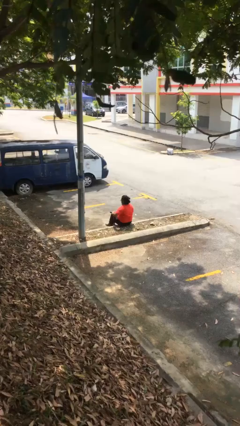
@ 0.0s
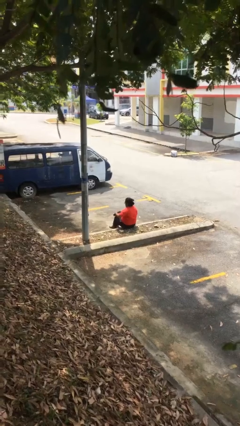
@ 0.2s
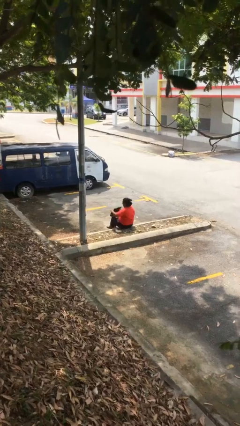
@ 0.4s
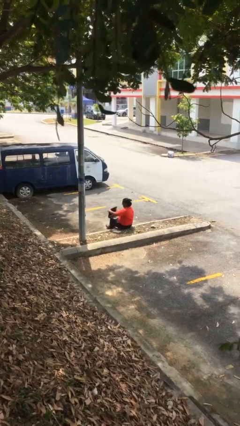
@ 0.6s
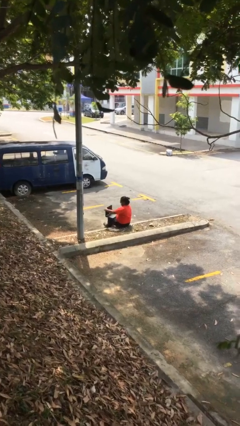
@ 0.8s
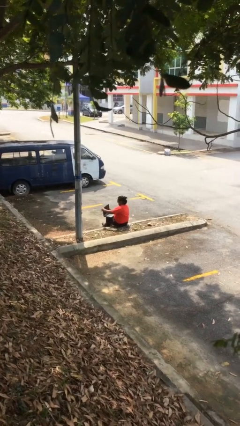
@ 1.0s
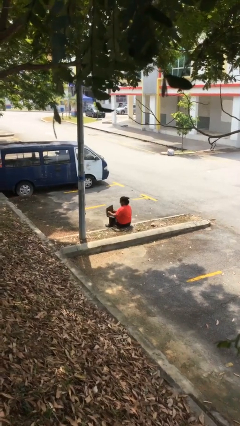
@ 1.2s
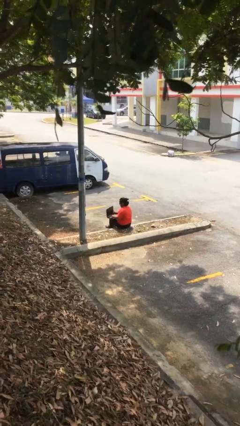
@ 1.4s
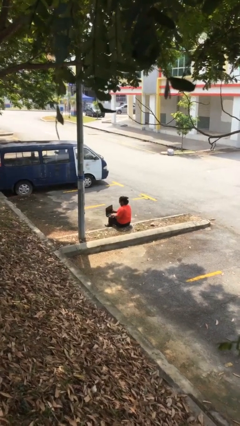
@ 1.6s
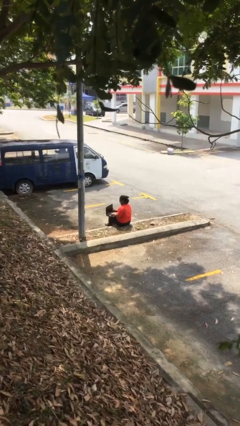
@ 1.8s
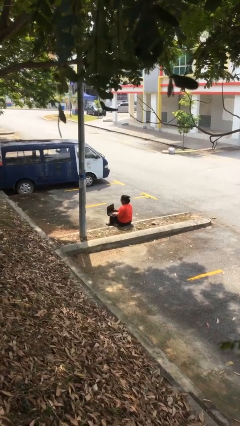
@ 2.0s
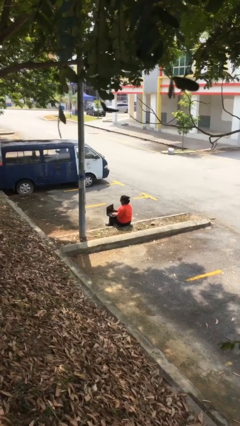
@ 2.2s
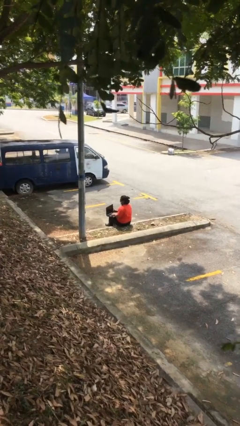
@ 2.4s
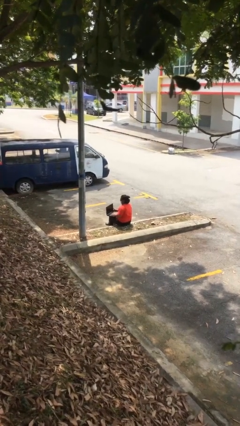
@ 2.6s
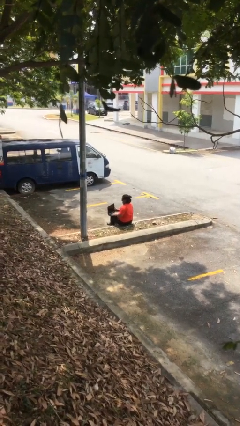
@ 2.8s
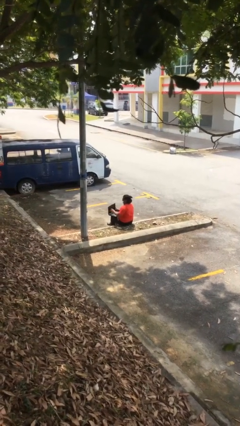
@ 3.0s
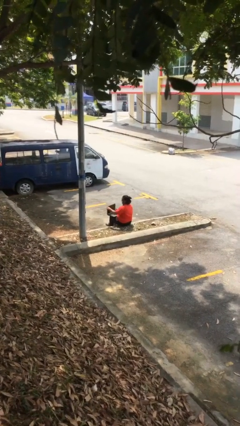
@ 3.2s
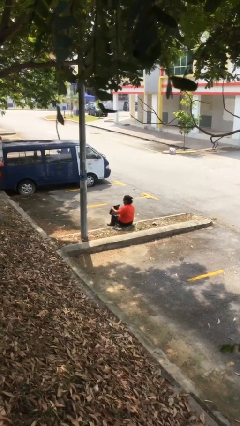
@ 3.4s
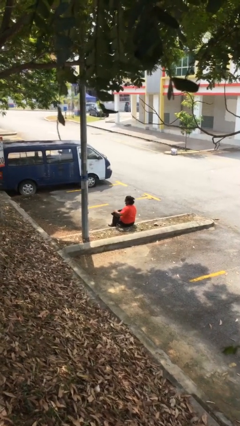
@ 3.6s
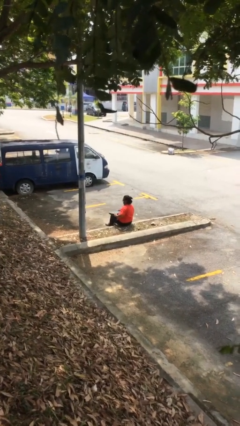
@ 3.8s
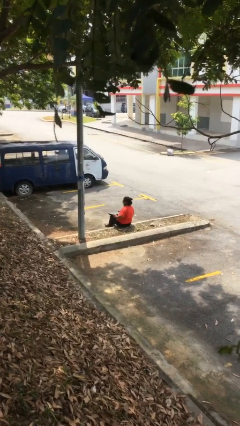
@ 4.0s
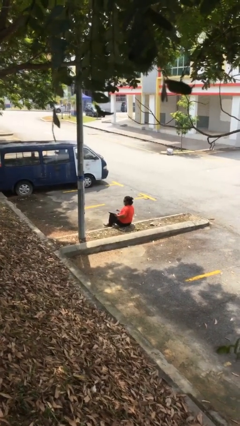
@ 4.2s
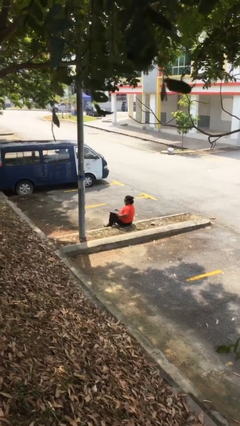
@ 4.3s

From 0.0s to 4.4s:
person interacts with laptop

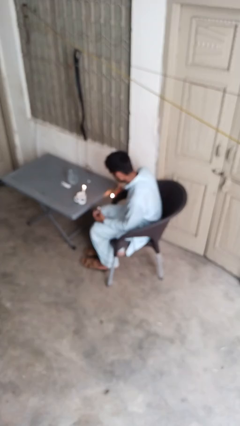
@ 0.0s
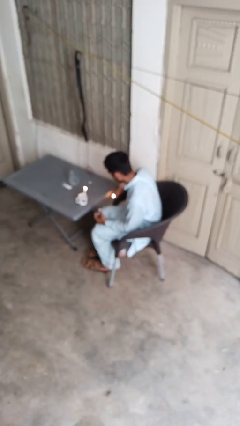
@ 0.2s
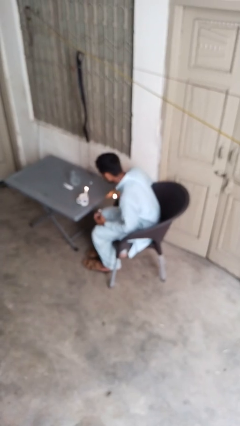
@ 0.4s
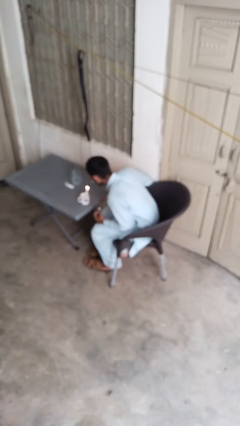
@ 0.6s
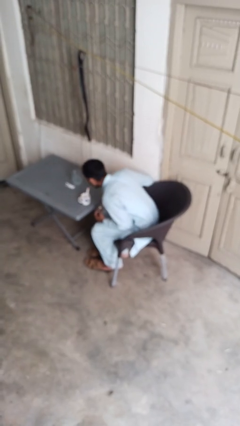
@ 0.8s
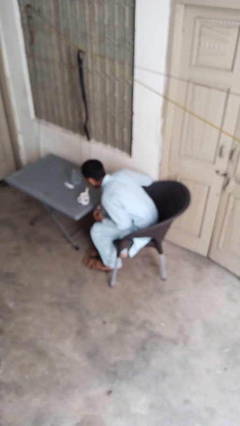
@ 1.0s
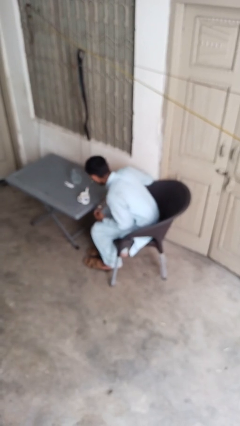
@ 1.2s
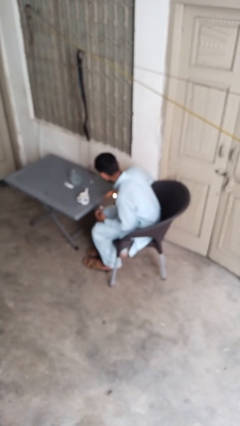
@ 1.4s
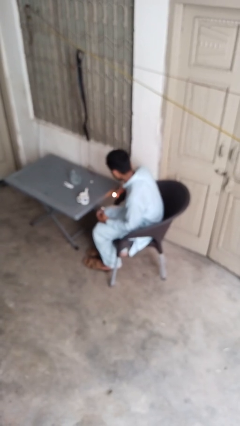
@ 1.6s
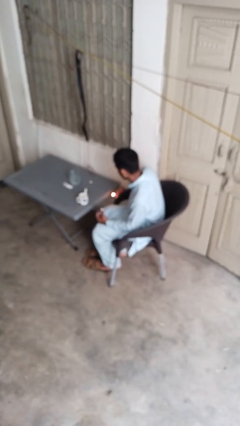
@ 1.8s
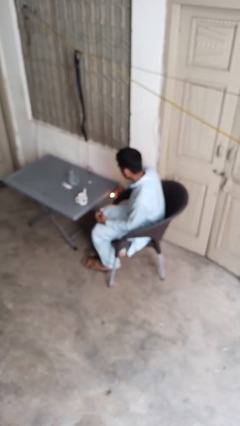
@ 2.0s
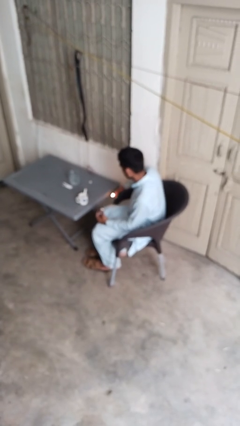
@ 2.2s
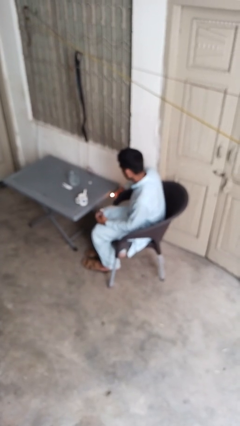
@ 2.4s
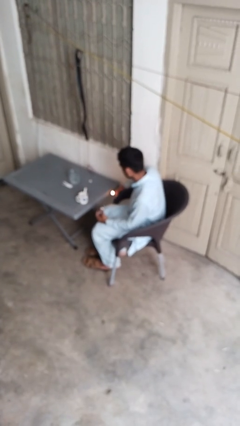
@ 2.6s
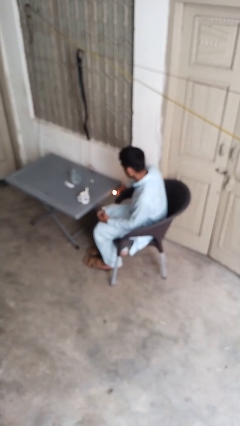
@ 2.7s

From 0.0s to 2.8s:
person extinguishes candle

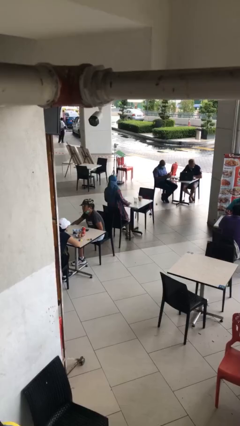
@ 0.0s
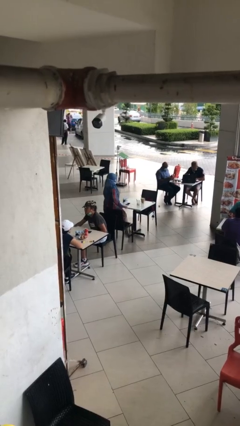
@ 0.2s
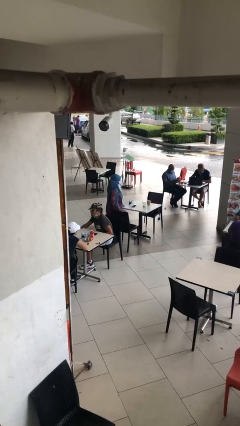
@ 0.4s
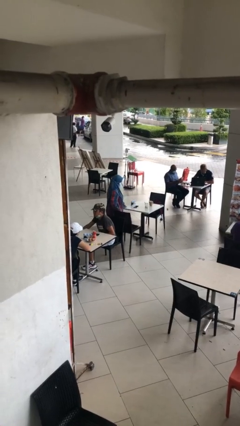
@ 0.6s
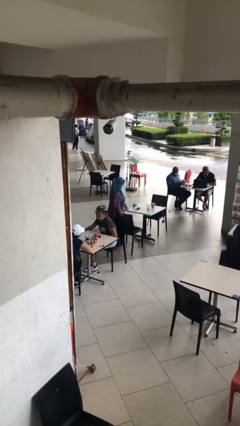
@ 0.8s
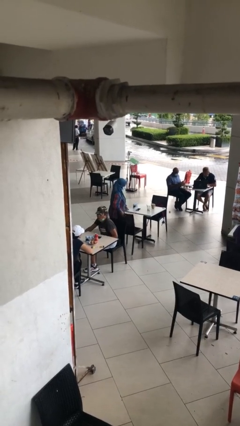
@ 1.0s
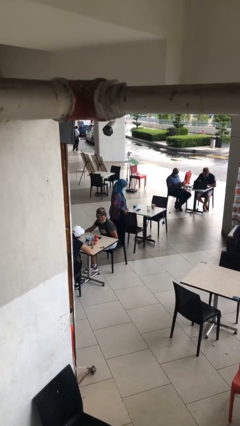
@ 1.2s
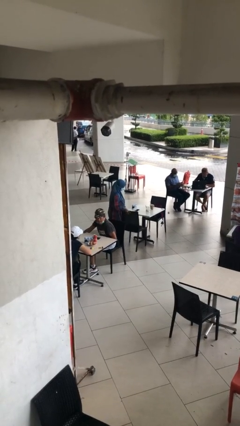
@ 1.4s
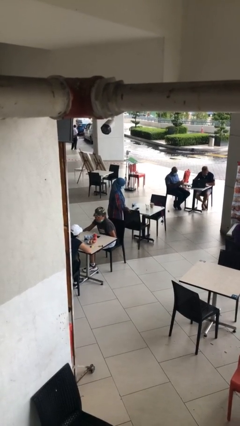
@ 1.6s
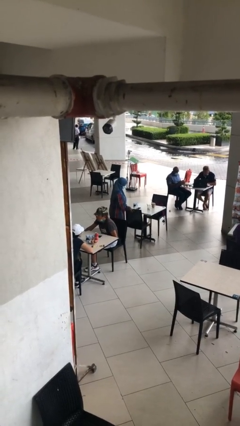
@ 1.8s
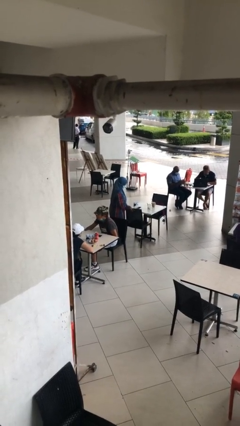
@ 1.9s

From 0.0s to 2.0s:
person stands up

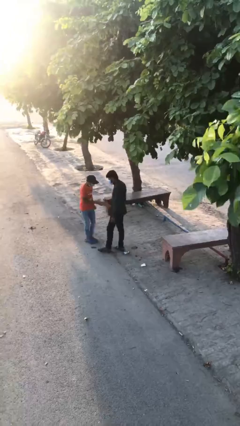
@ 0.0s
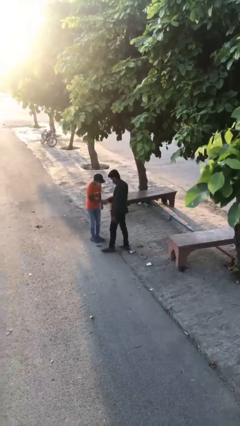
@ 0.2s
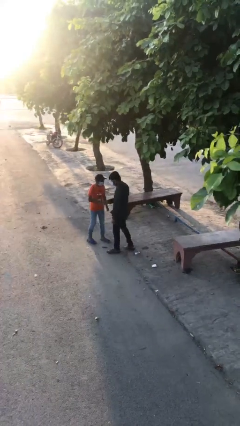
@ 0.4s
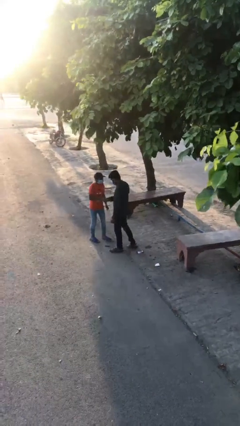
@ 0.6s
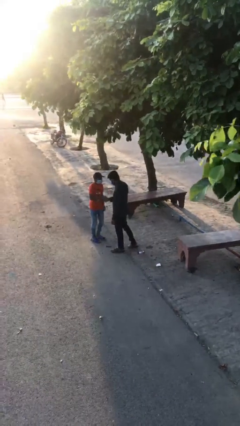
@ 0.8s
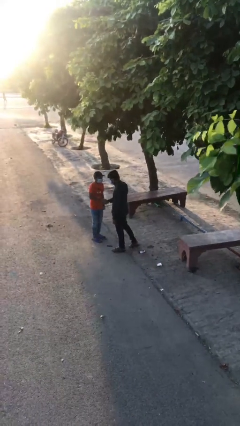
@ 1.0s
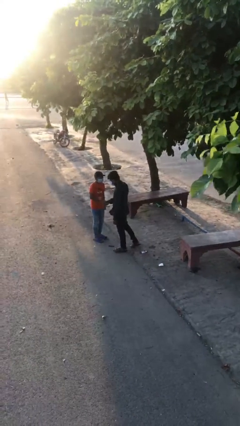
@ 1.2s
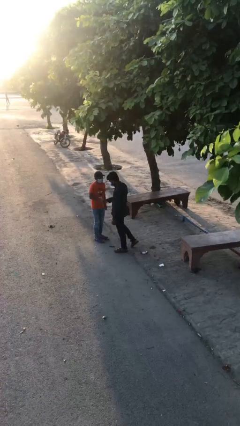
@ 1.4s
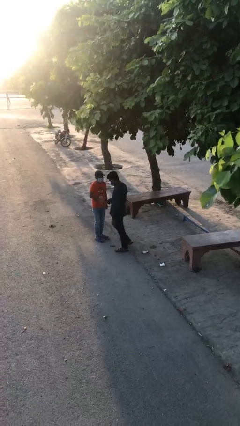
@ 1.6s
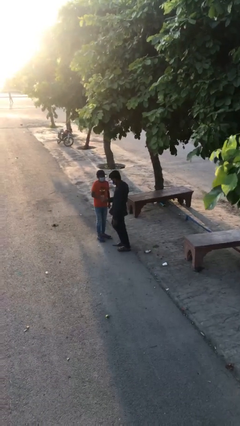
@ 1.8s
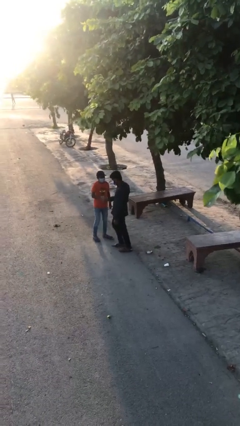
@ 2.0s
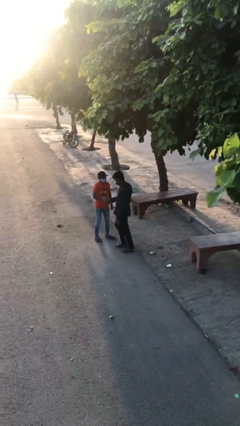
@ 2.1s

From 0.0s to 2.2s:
person shakes hand

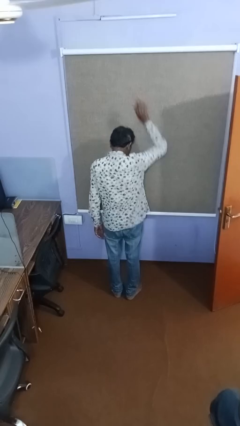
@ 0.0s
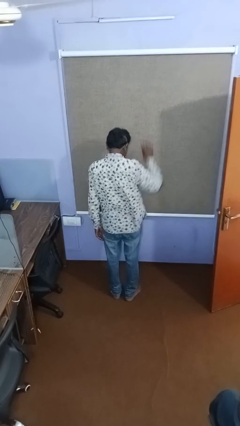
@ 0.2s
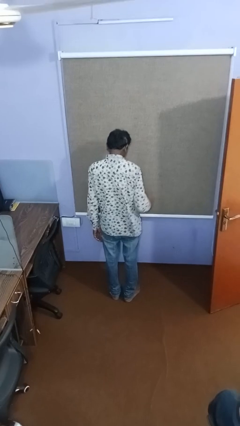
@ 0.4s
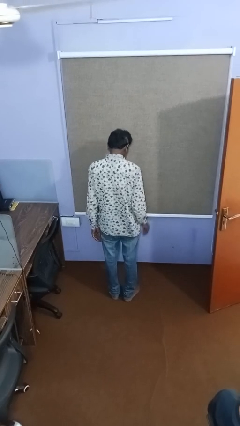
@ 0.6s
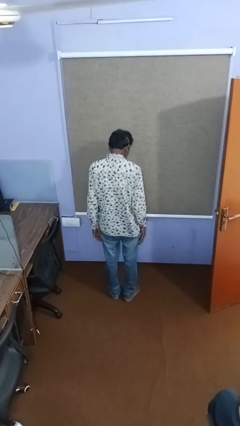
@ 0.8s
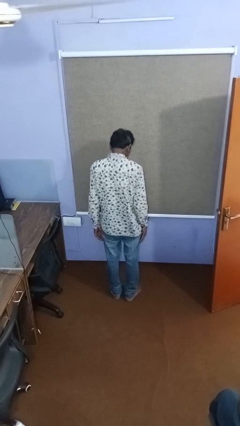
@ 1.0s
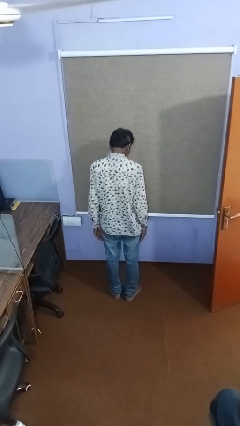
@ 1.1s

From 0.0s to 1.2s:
person gestures lower hand

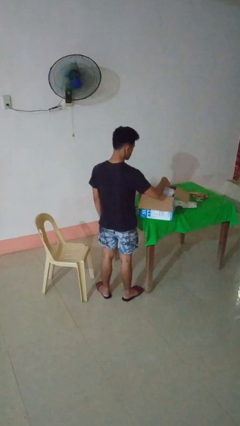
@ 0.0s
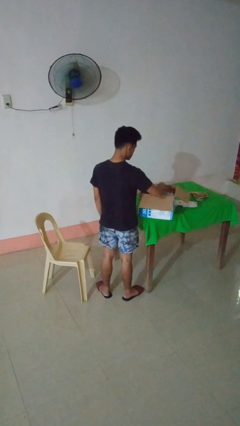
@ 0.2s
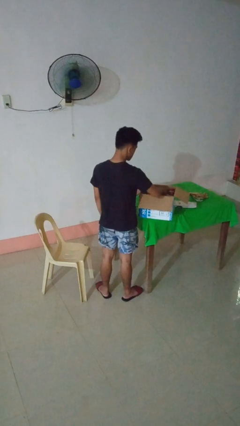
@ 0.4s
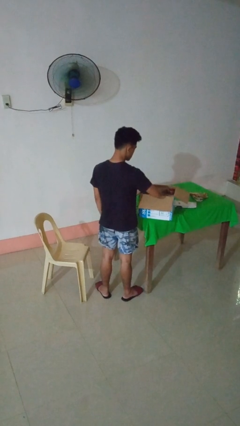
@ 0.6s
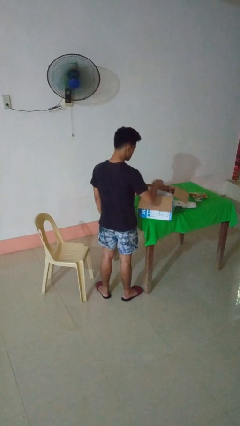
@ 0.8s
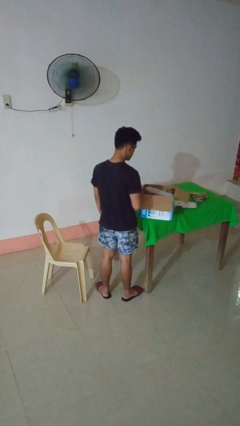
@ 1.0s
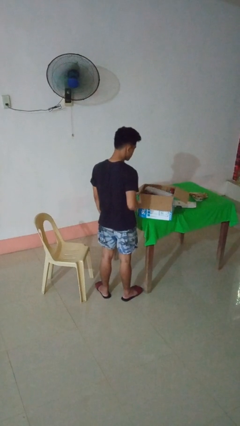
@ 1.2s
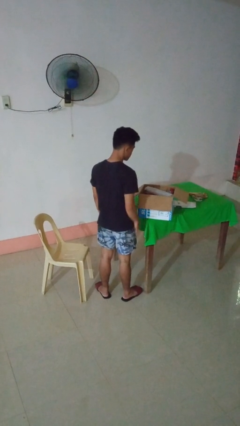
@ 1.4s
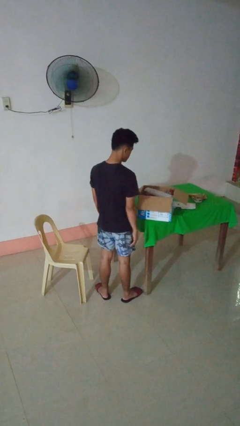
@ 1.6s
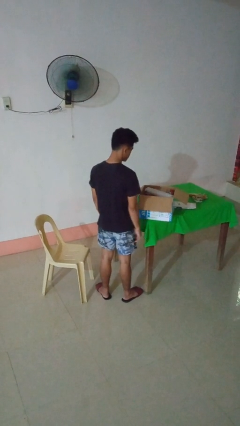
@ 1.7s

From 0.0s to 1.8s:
person puts object into box

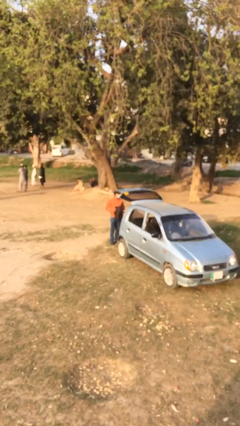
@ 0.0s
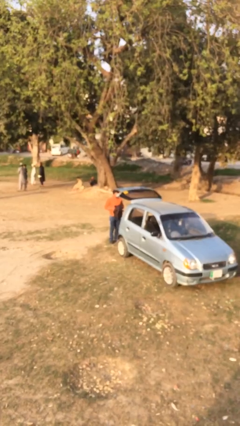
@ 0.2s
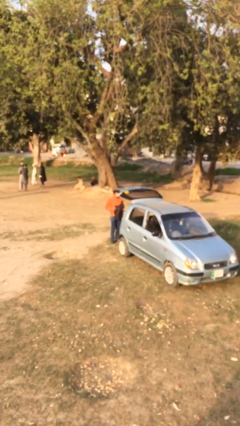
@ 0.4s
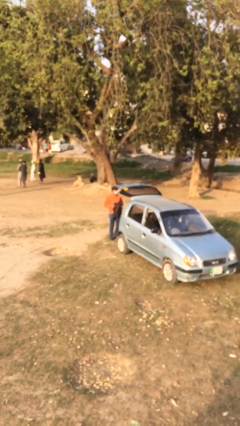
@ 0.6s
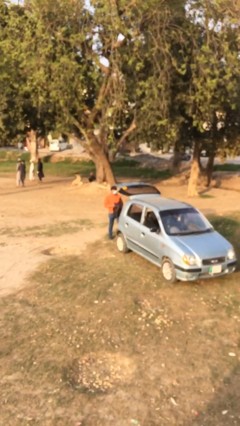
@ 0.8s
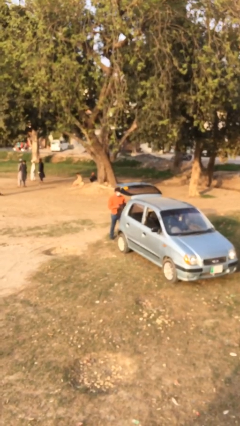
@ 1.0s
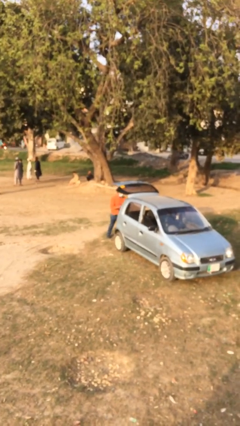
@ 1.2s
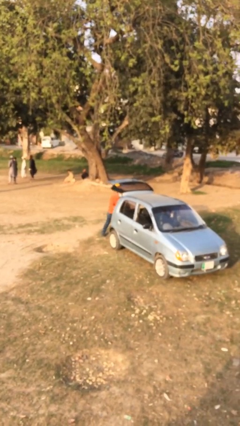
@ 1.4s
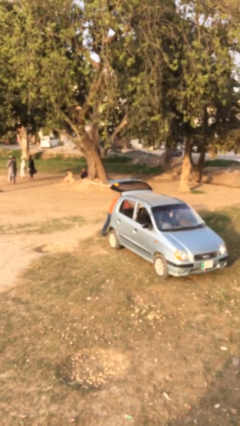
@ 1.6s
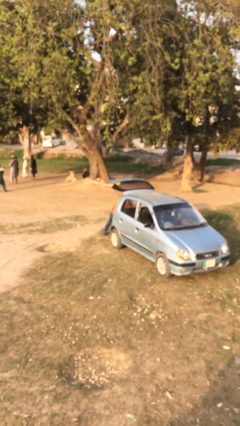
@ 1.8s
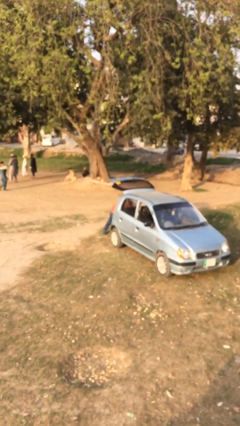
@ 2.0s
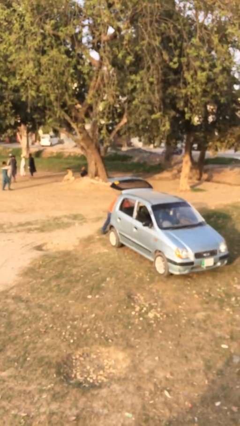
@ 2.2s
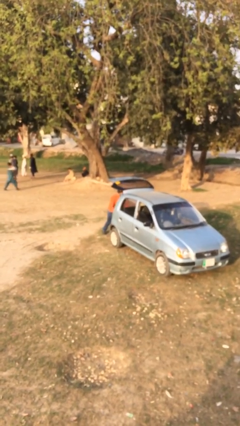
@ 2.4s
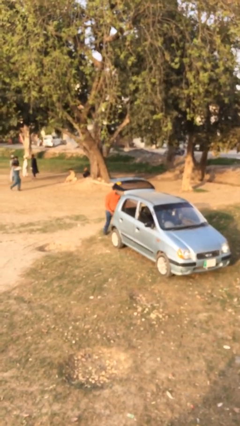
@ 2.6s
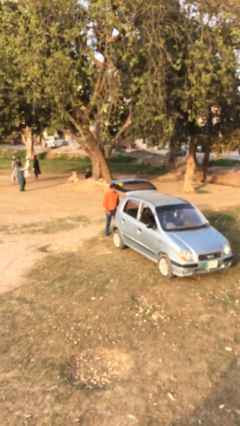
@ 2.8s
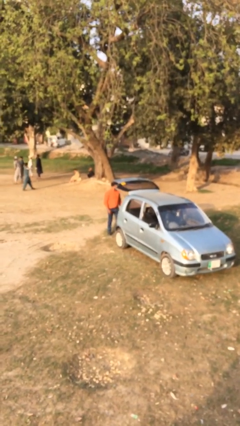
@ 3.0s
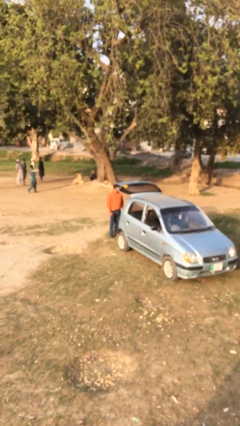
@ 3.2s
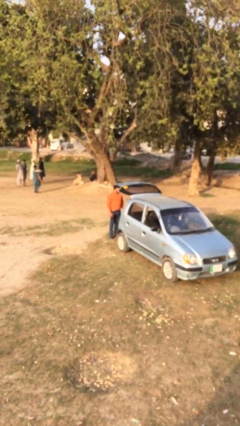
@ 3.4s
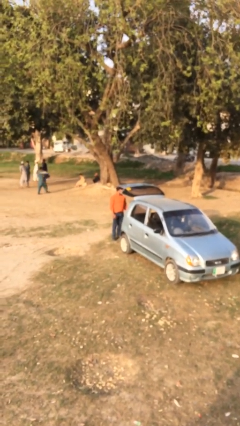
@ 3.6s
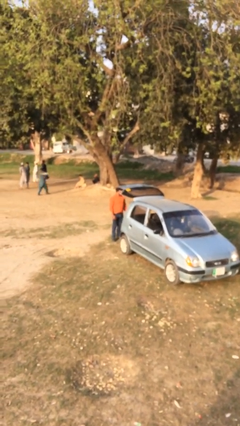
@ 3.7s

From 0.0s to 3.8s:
person loads car
